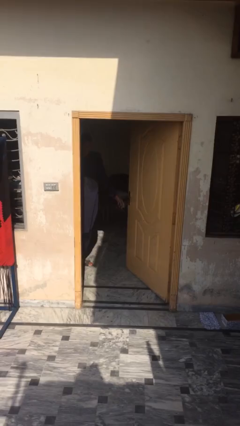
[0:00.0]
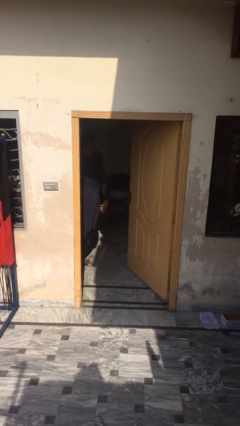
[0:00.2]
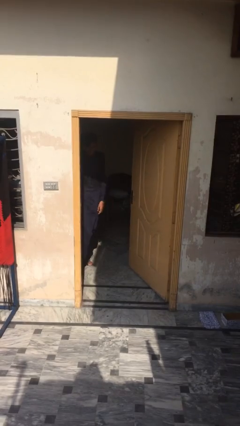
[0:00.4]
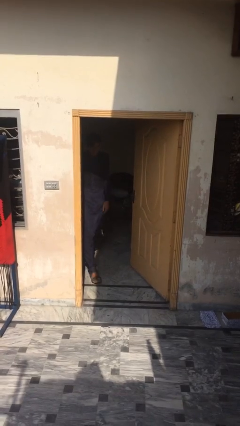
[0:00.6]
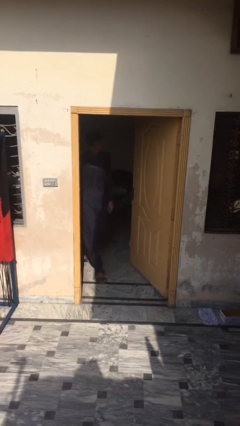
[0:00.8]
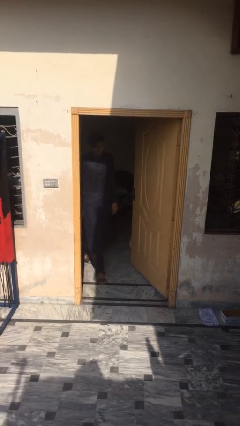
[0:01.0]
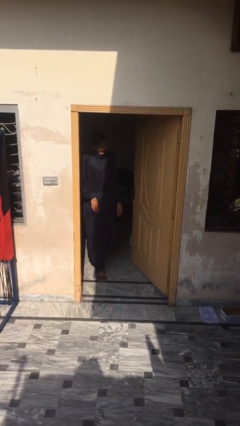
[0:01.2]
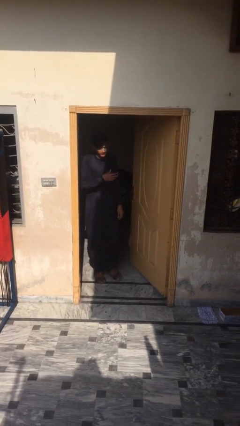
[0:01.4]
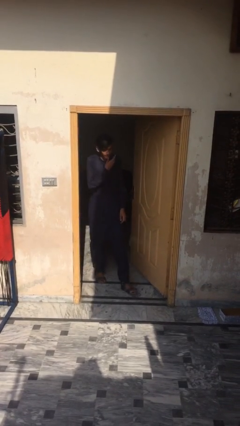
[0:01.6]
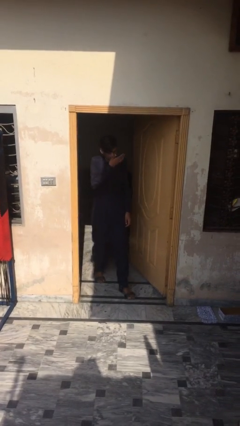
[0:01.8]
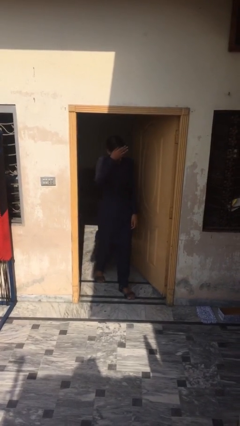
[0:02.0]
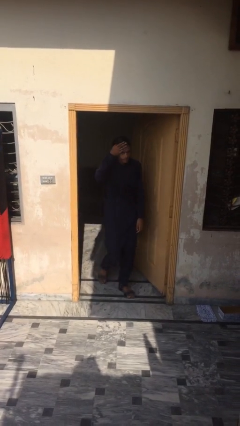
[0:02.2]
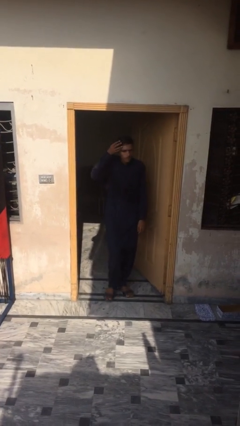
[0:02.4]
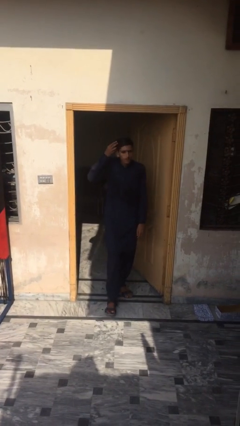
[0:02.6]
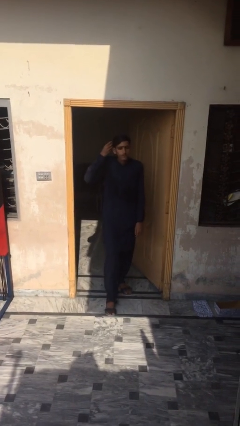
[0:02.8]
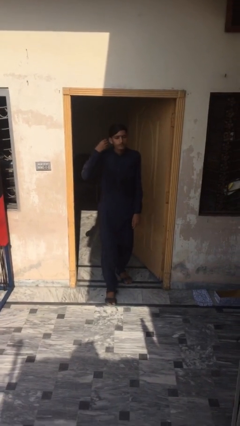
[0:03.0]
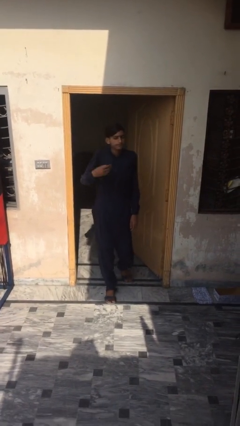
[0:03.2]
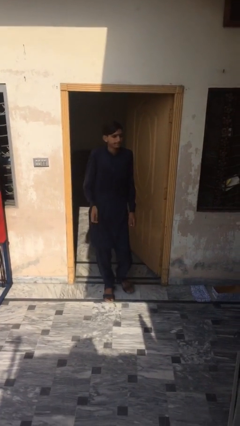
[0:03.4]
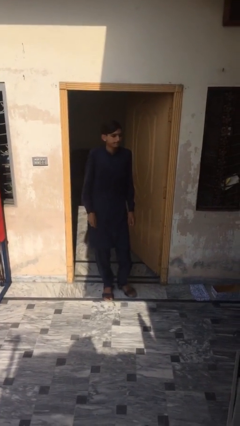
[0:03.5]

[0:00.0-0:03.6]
person enters scene through structure

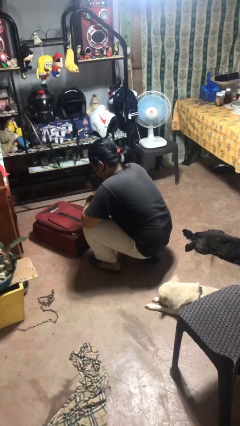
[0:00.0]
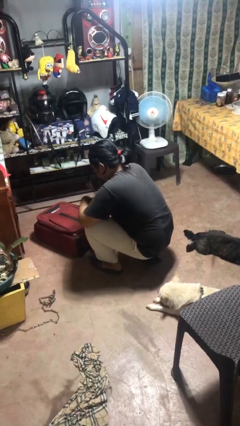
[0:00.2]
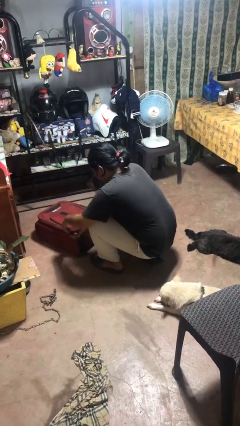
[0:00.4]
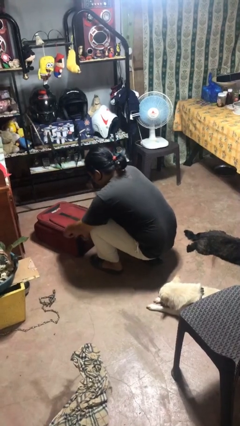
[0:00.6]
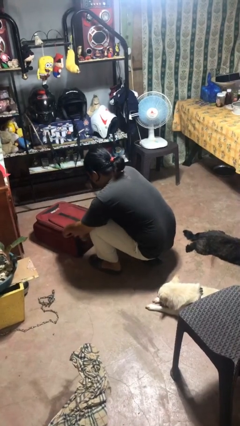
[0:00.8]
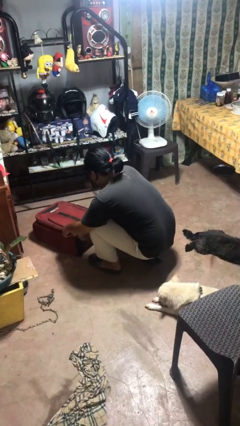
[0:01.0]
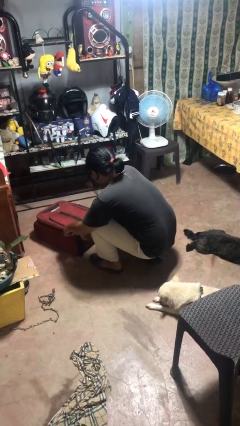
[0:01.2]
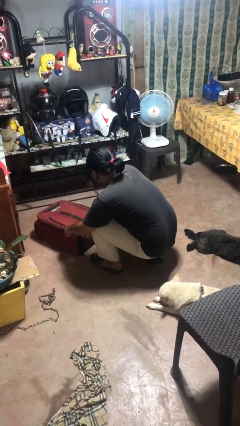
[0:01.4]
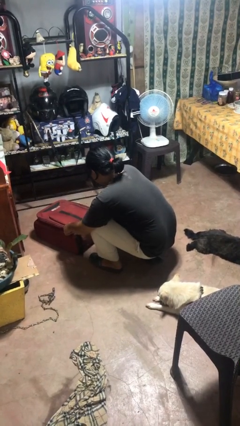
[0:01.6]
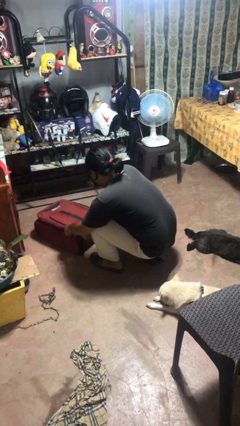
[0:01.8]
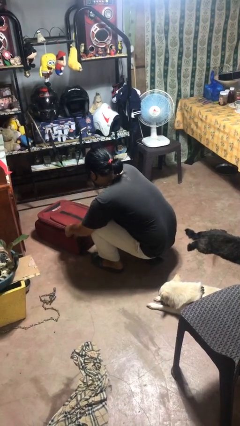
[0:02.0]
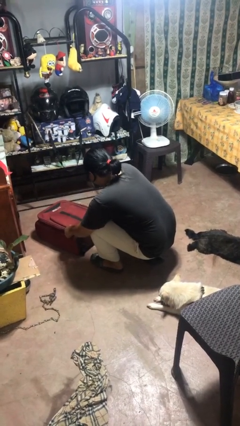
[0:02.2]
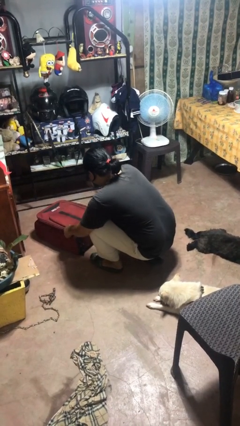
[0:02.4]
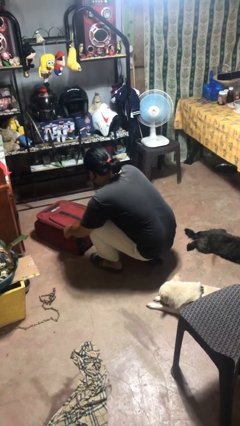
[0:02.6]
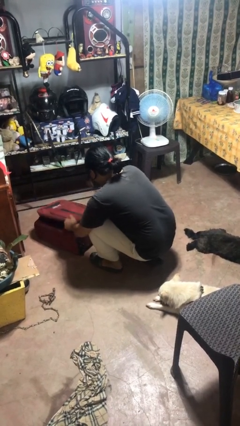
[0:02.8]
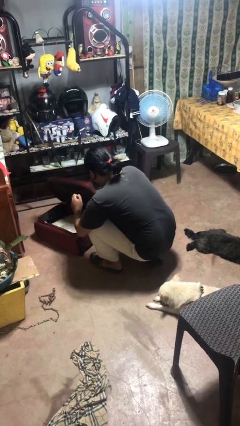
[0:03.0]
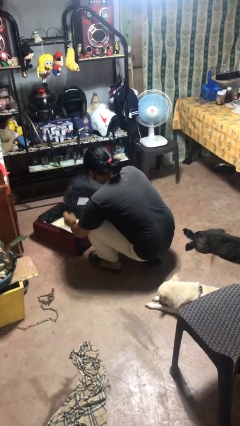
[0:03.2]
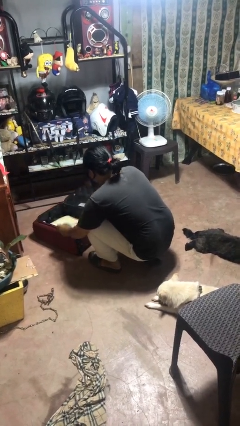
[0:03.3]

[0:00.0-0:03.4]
person opens suitcase

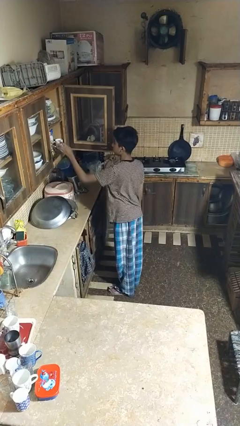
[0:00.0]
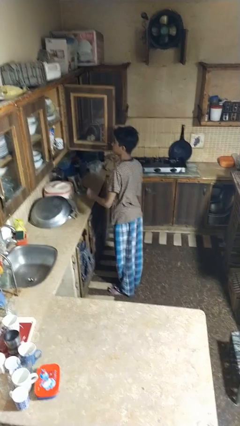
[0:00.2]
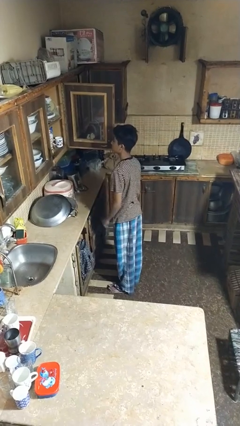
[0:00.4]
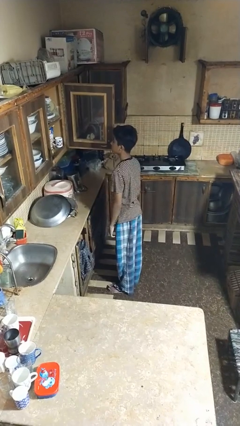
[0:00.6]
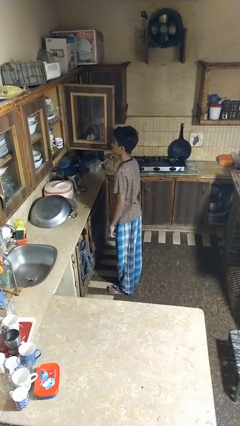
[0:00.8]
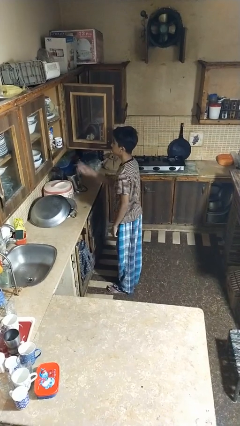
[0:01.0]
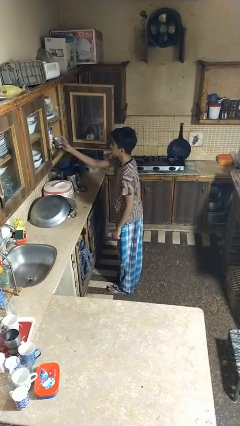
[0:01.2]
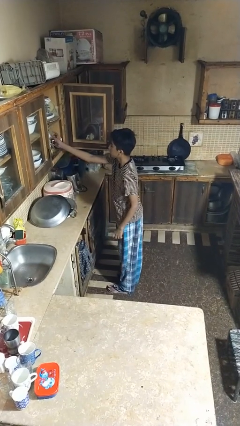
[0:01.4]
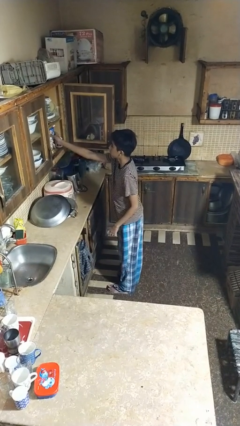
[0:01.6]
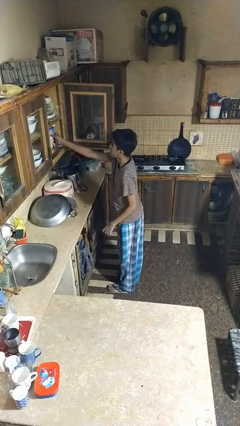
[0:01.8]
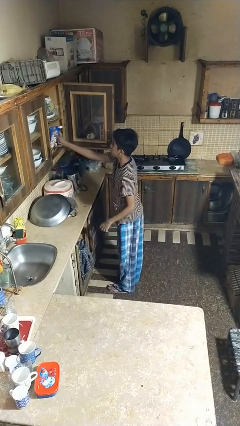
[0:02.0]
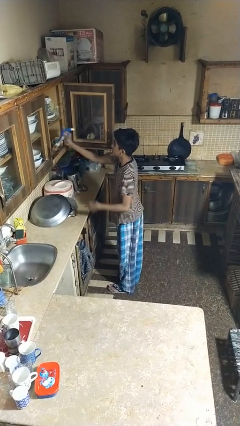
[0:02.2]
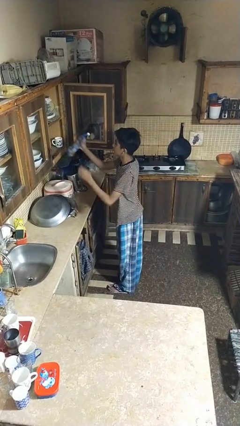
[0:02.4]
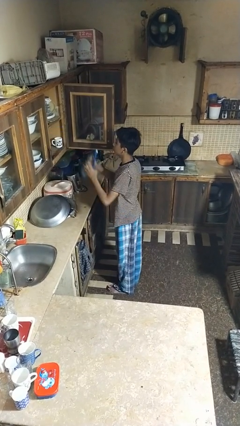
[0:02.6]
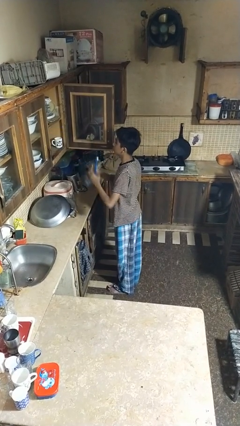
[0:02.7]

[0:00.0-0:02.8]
person takes object from cabinet

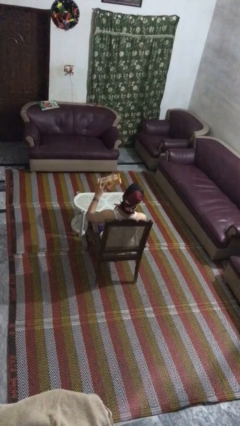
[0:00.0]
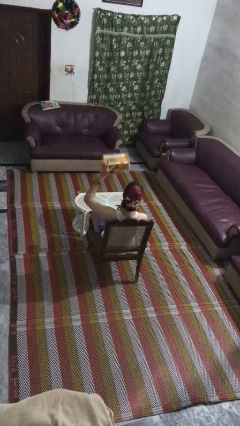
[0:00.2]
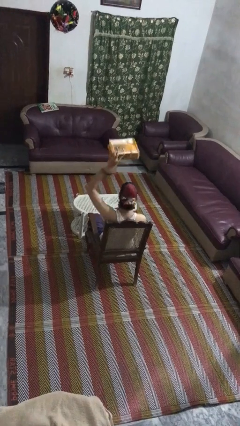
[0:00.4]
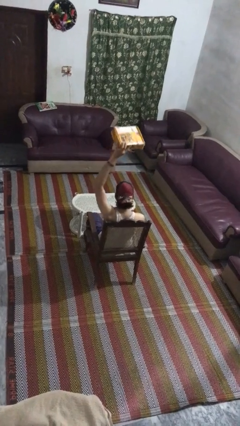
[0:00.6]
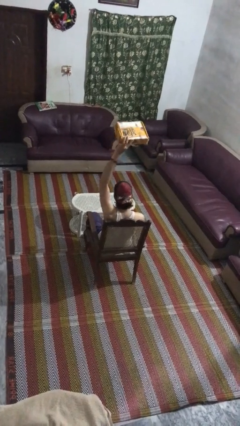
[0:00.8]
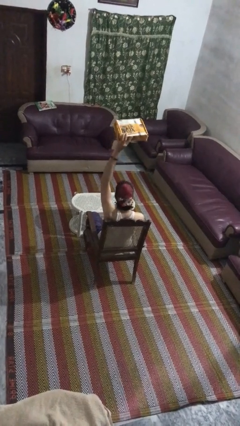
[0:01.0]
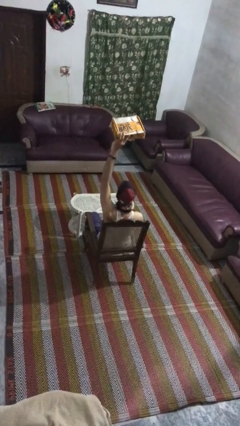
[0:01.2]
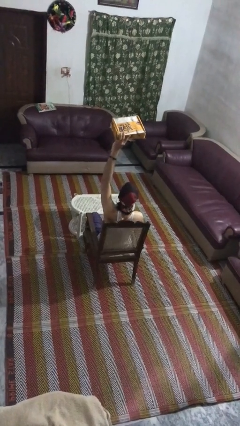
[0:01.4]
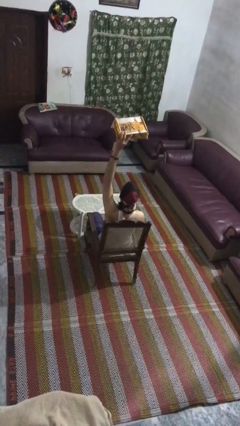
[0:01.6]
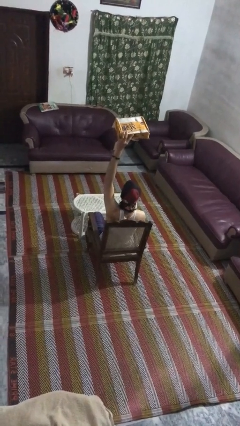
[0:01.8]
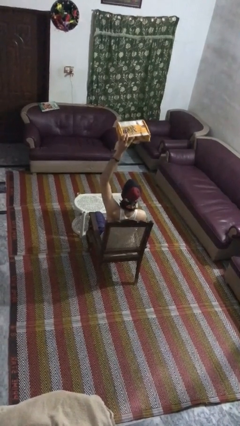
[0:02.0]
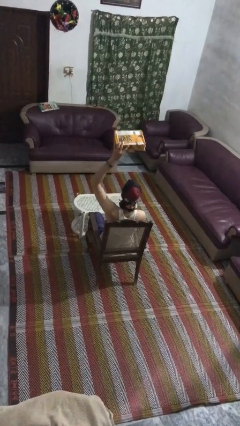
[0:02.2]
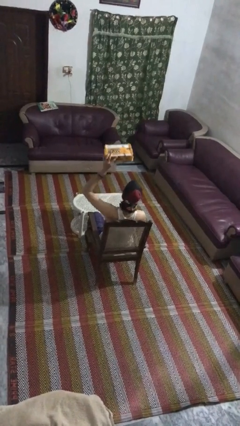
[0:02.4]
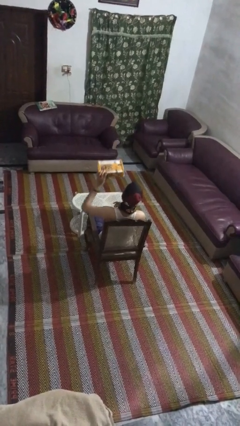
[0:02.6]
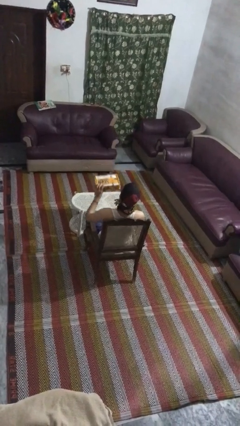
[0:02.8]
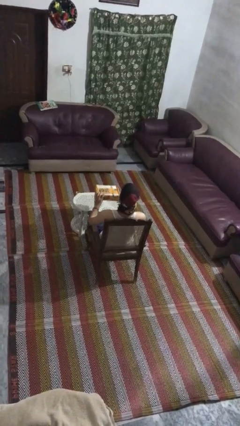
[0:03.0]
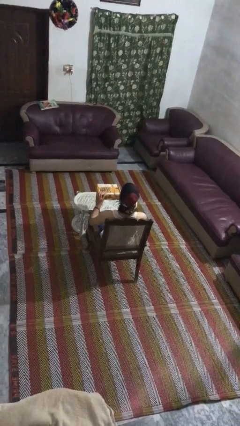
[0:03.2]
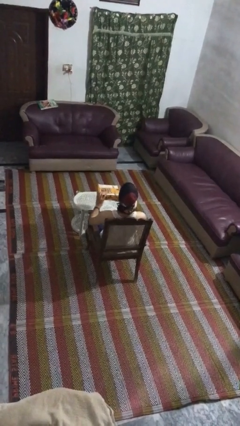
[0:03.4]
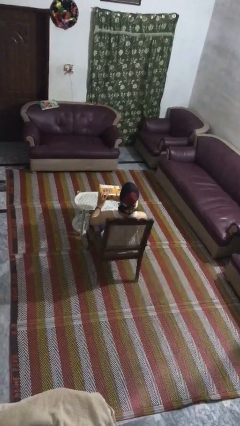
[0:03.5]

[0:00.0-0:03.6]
person holds object above head

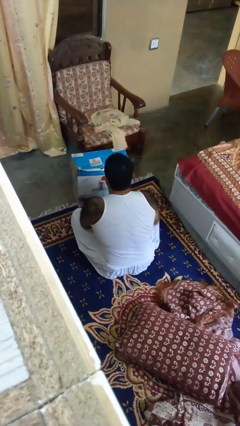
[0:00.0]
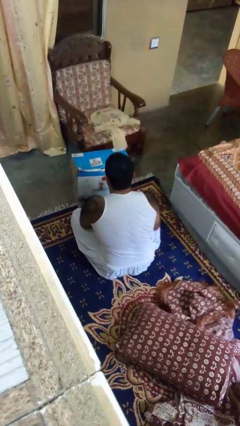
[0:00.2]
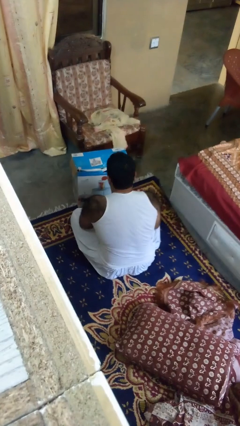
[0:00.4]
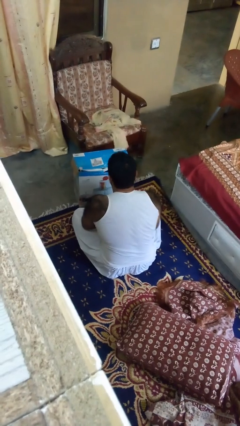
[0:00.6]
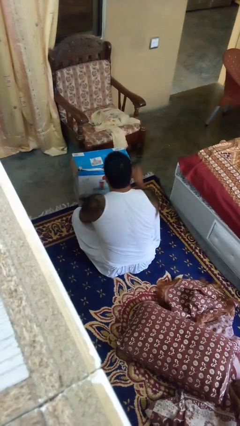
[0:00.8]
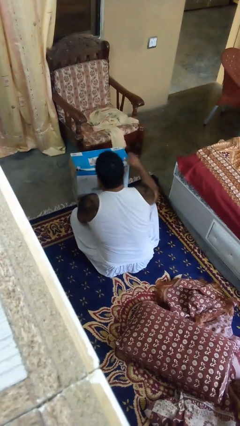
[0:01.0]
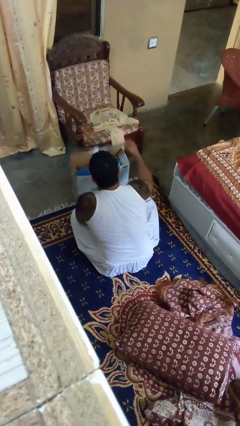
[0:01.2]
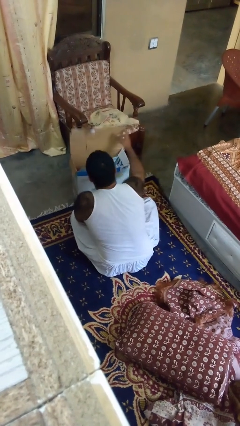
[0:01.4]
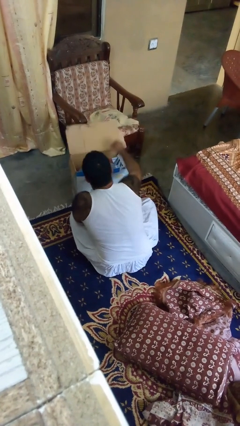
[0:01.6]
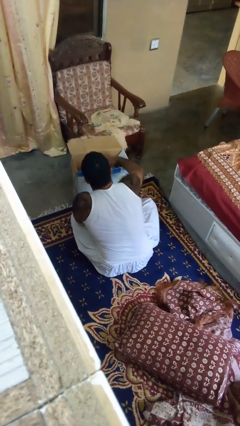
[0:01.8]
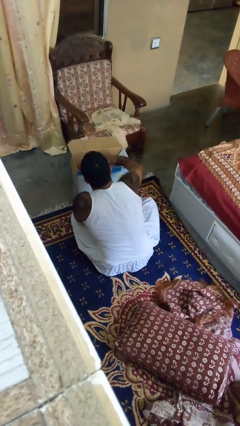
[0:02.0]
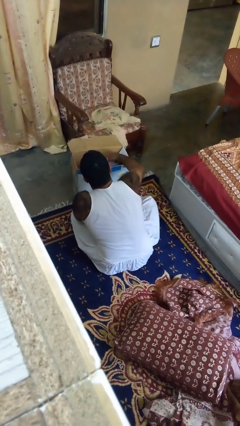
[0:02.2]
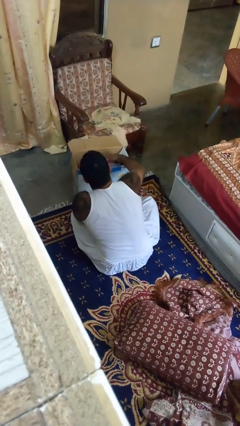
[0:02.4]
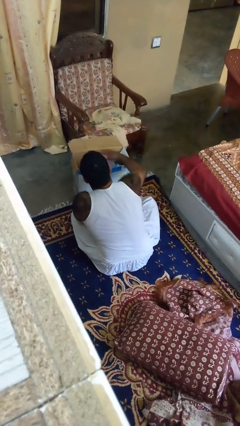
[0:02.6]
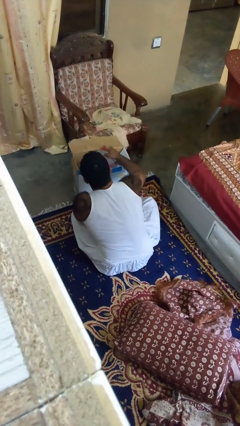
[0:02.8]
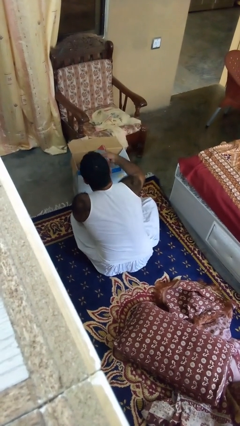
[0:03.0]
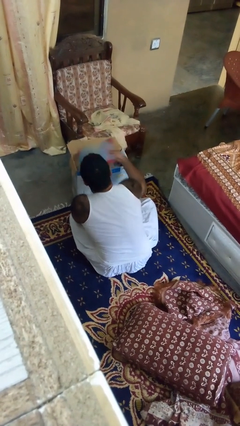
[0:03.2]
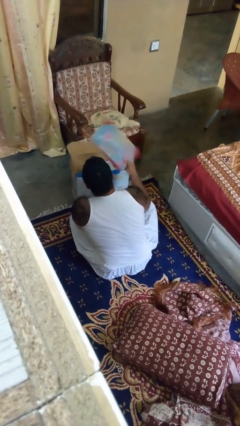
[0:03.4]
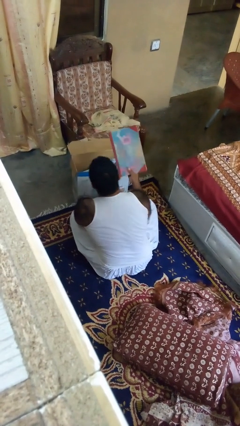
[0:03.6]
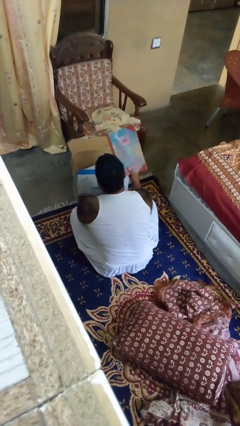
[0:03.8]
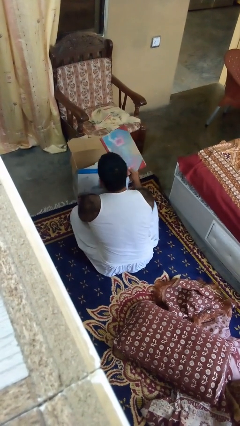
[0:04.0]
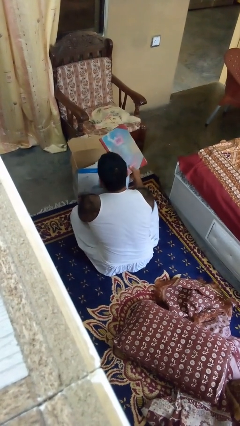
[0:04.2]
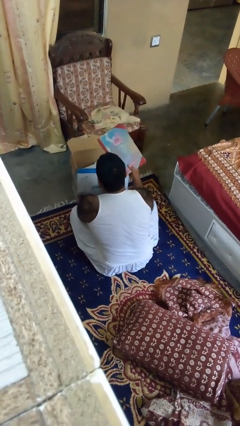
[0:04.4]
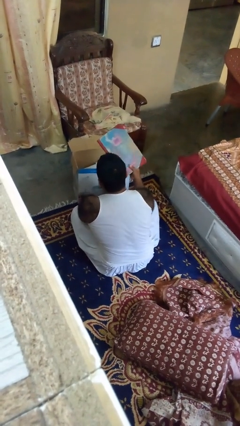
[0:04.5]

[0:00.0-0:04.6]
person takes object from box
